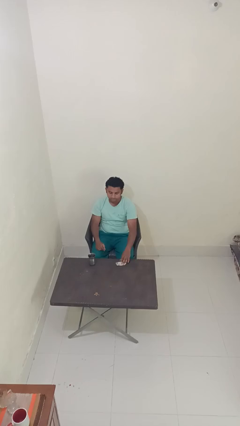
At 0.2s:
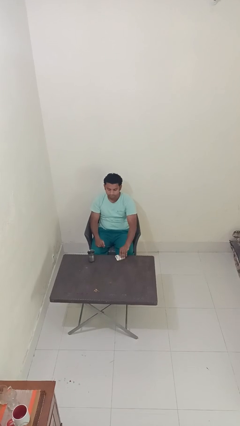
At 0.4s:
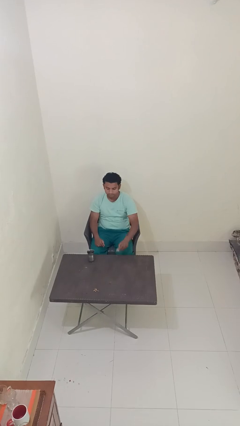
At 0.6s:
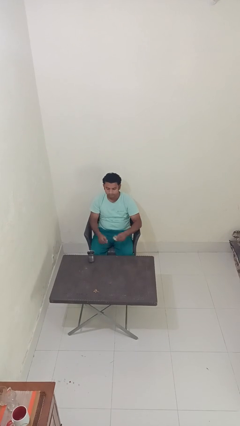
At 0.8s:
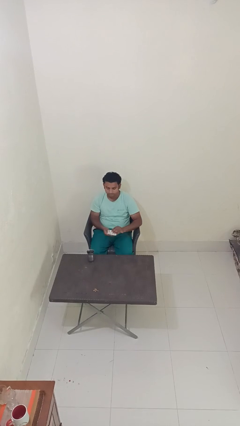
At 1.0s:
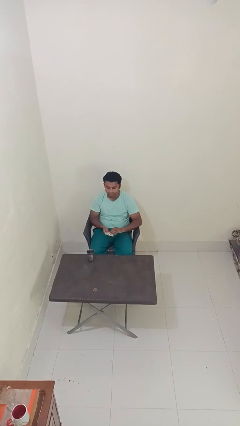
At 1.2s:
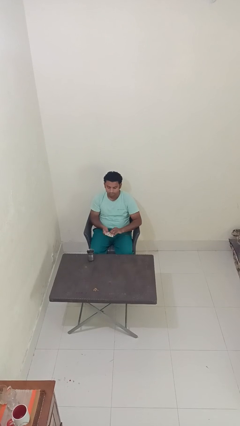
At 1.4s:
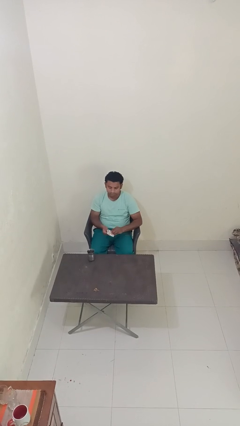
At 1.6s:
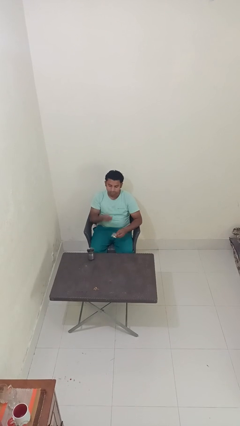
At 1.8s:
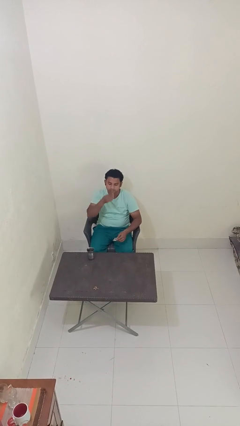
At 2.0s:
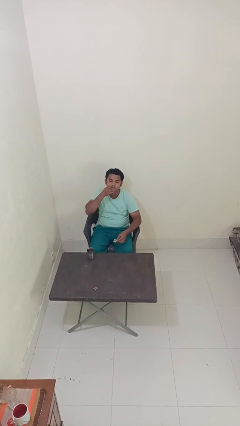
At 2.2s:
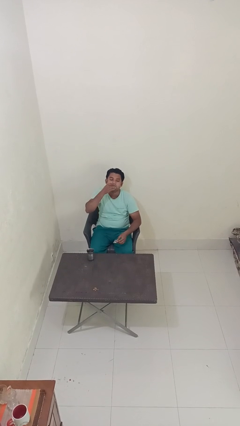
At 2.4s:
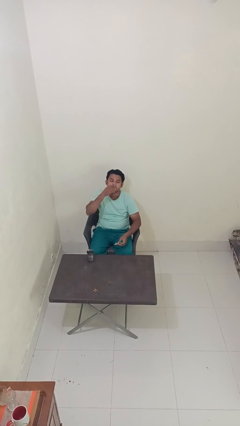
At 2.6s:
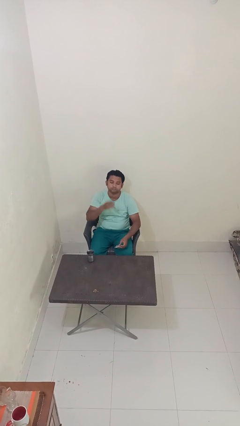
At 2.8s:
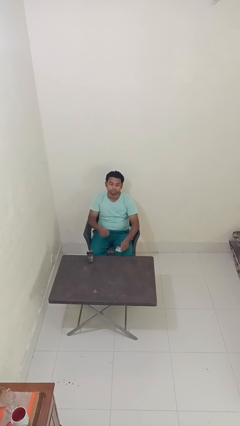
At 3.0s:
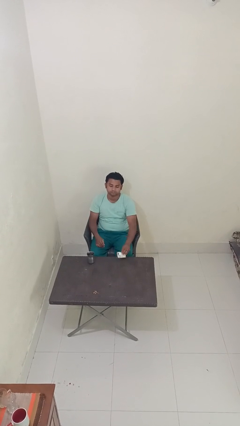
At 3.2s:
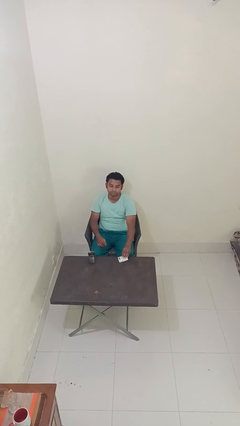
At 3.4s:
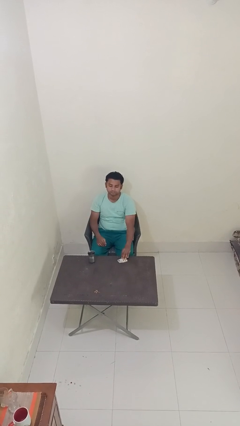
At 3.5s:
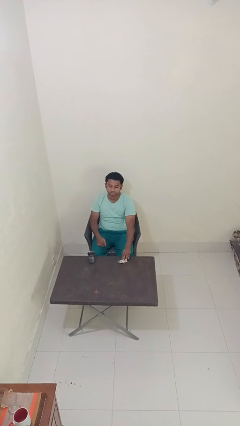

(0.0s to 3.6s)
person takes medicine pills

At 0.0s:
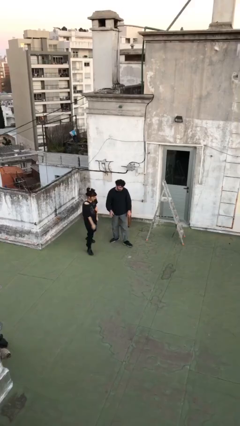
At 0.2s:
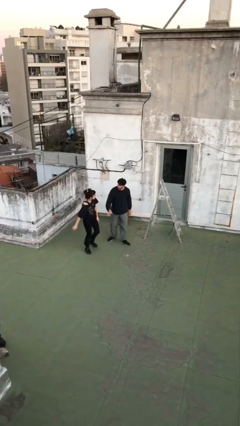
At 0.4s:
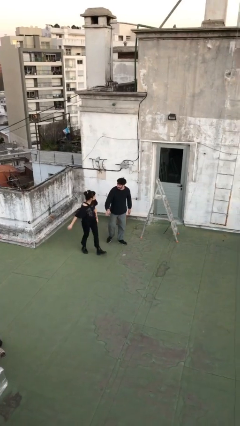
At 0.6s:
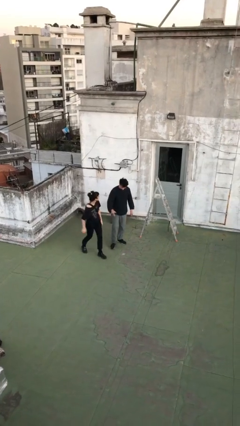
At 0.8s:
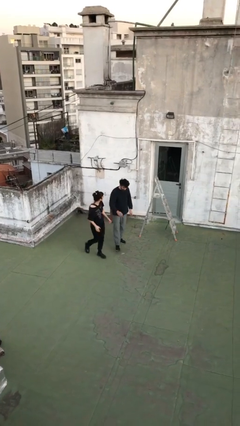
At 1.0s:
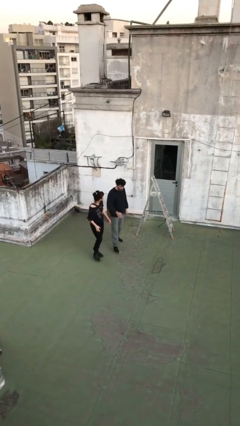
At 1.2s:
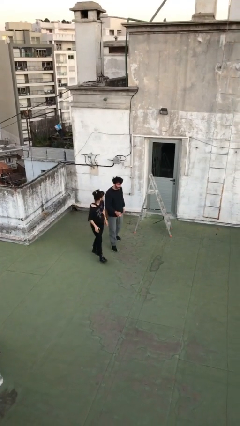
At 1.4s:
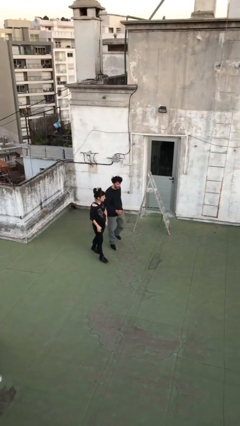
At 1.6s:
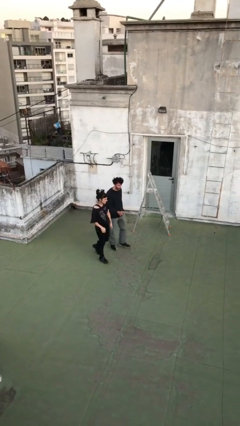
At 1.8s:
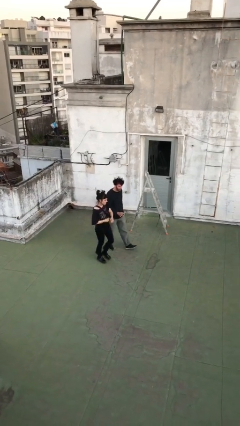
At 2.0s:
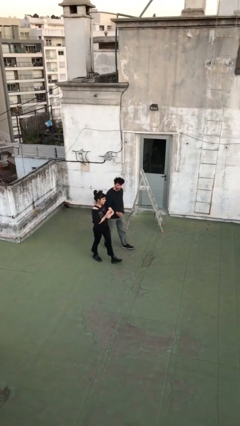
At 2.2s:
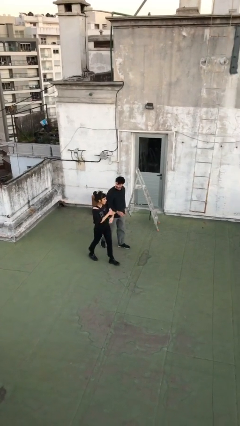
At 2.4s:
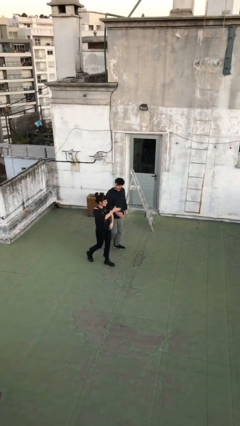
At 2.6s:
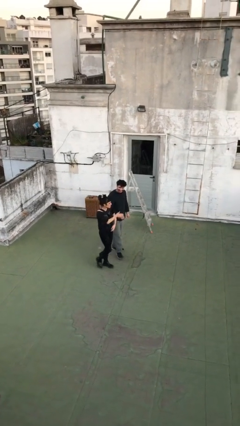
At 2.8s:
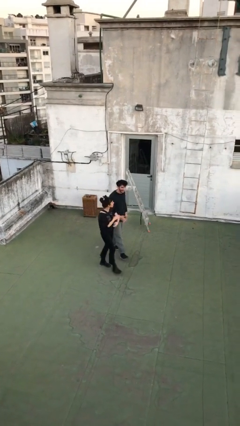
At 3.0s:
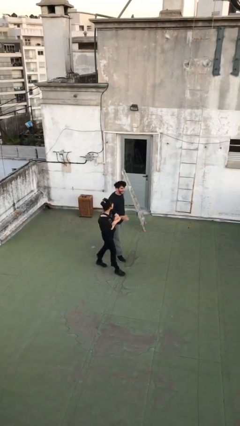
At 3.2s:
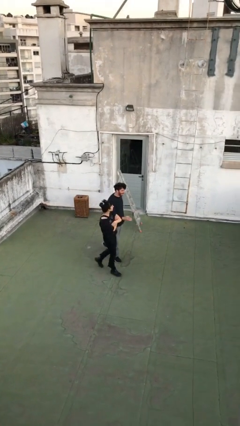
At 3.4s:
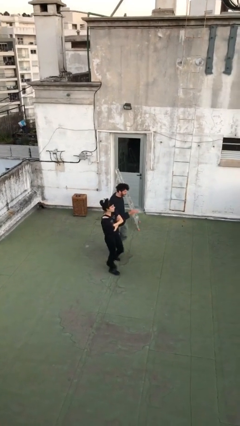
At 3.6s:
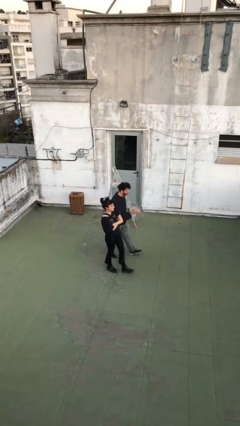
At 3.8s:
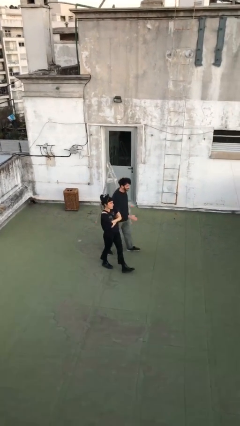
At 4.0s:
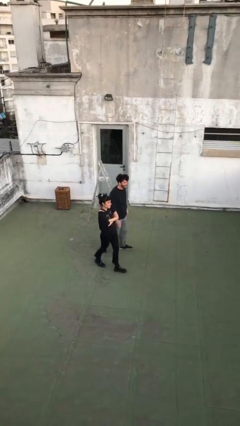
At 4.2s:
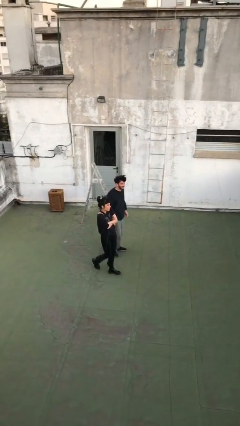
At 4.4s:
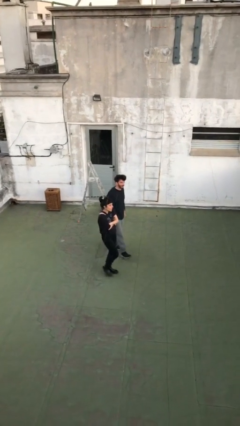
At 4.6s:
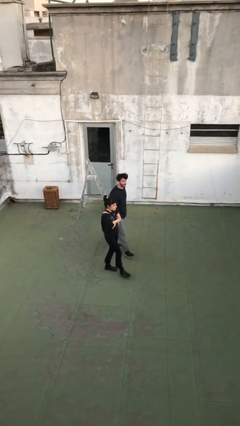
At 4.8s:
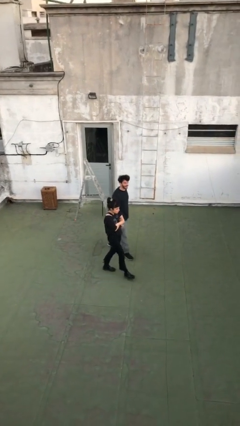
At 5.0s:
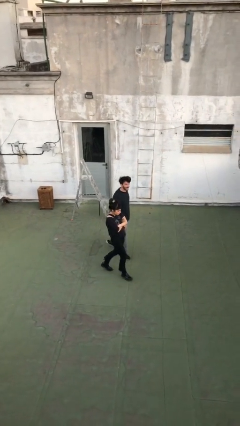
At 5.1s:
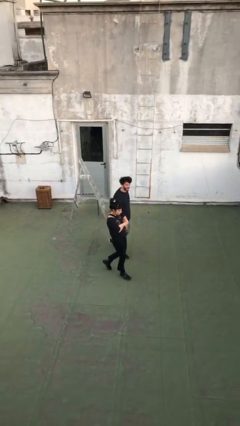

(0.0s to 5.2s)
person talks to person

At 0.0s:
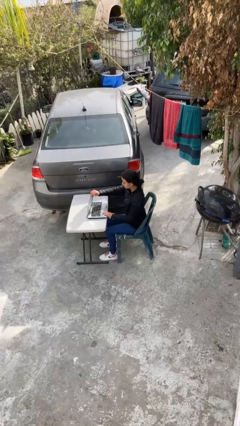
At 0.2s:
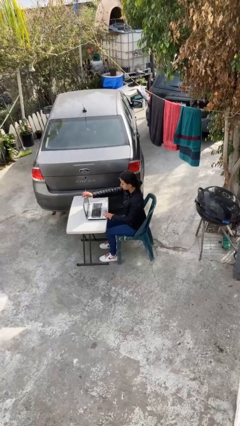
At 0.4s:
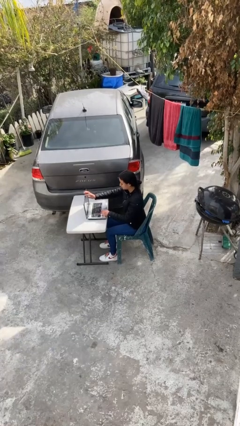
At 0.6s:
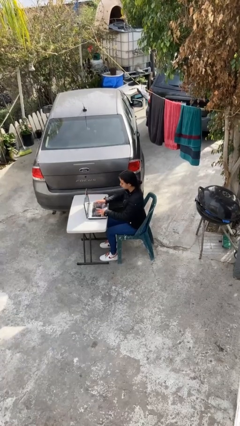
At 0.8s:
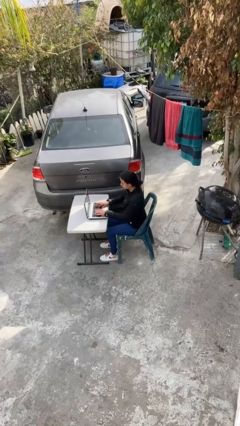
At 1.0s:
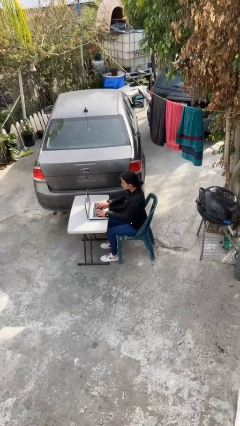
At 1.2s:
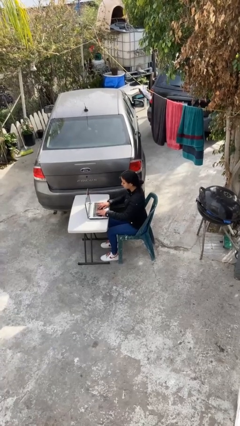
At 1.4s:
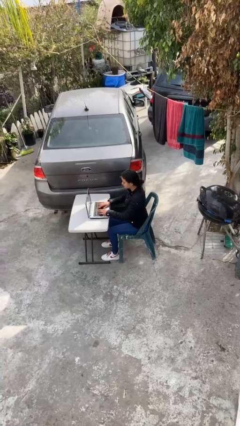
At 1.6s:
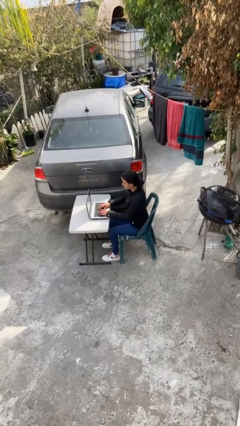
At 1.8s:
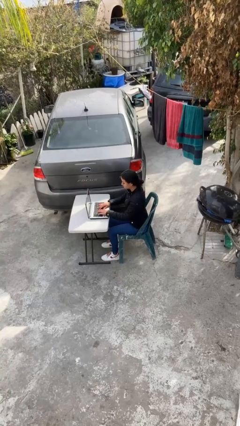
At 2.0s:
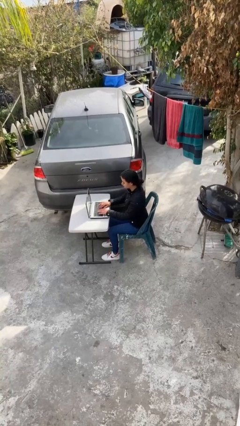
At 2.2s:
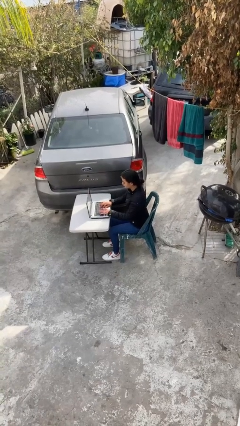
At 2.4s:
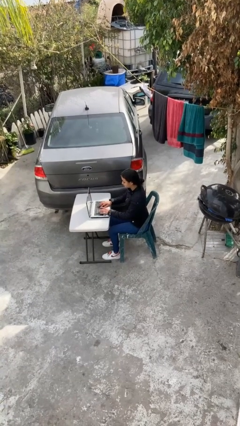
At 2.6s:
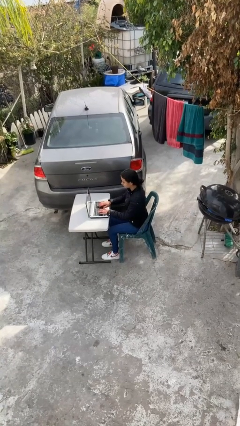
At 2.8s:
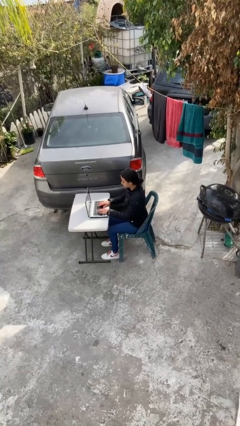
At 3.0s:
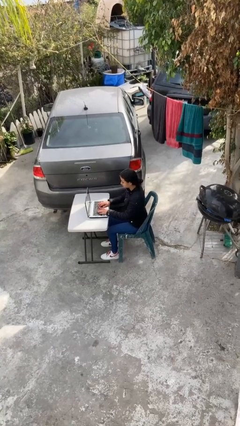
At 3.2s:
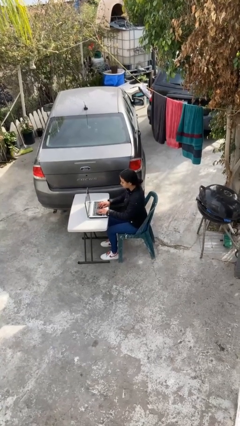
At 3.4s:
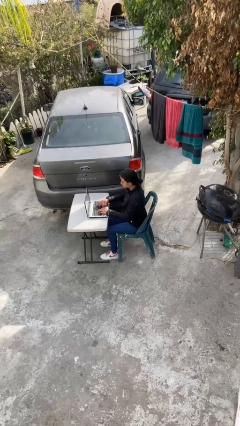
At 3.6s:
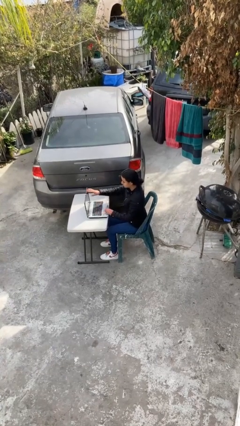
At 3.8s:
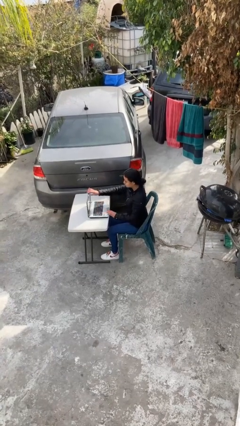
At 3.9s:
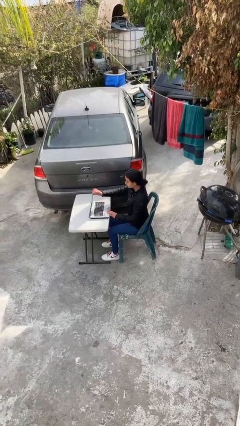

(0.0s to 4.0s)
person interacts with laptop

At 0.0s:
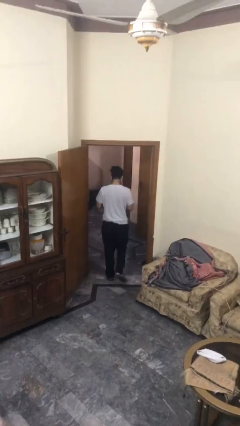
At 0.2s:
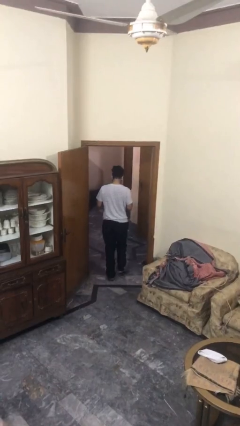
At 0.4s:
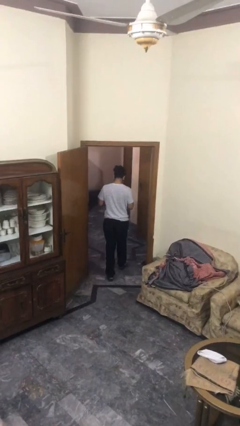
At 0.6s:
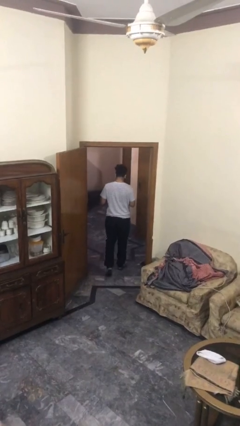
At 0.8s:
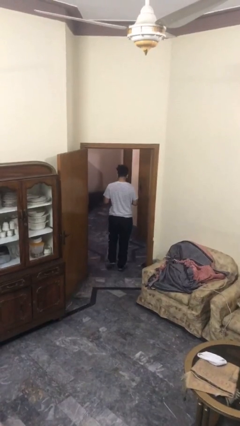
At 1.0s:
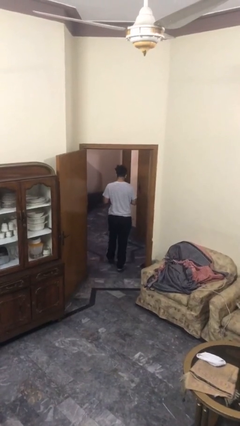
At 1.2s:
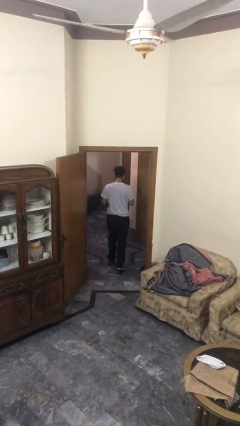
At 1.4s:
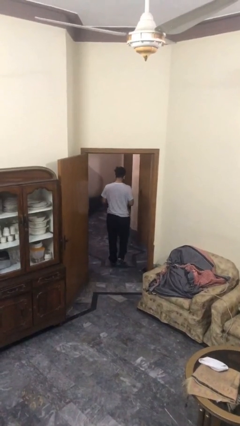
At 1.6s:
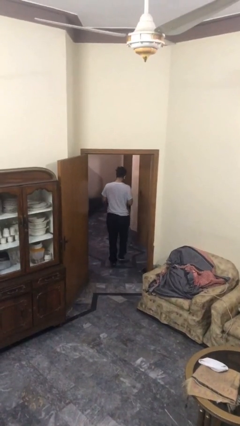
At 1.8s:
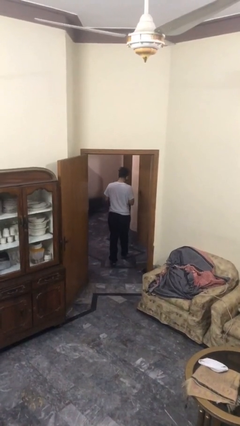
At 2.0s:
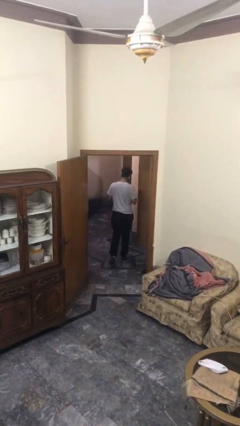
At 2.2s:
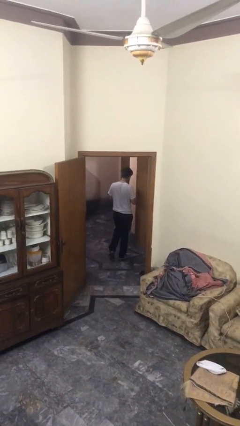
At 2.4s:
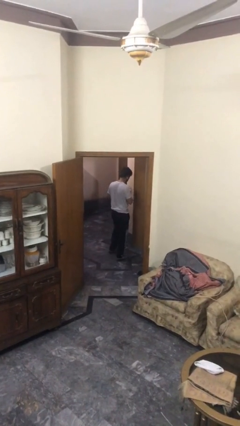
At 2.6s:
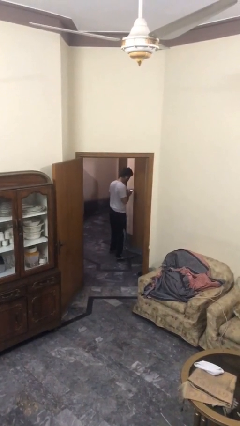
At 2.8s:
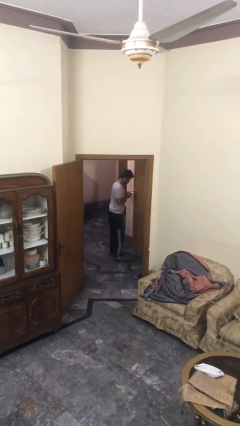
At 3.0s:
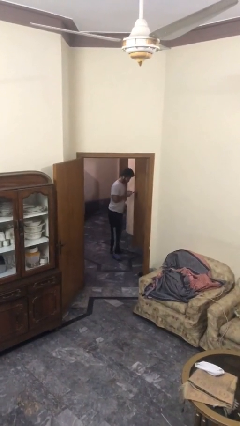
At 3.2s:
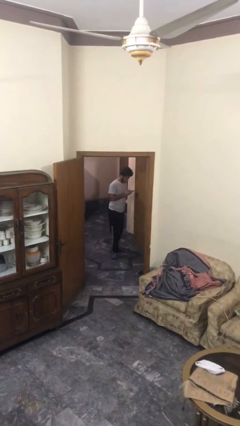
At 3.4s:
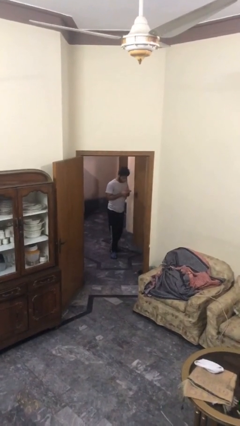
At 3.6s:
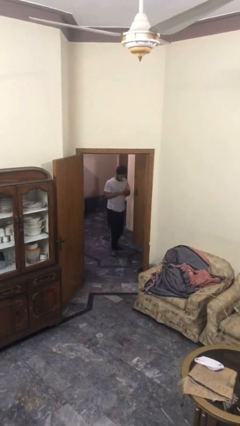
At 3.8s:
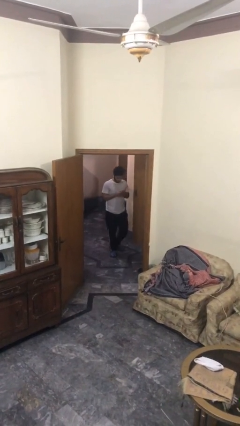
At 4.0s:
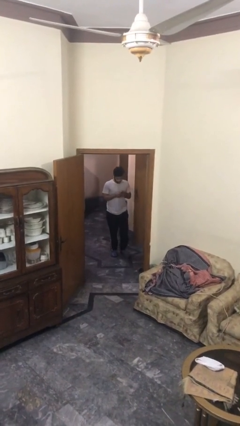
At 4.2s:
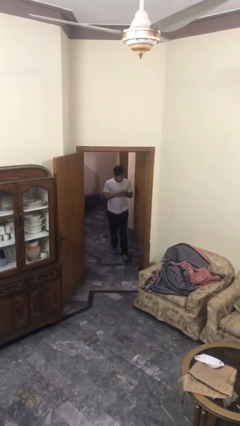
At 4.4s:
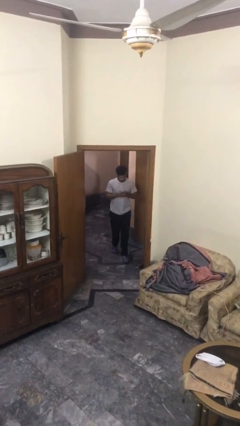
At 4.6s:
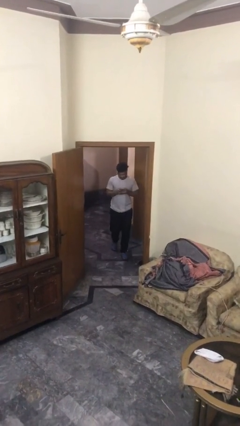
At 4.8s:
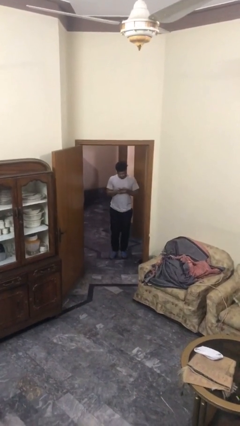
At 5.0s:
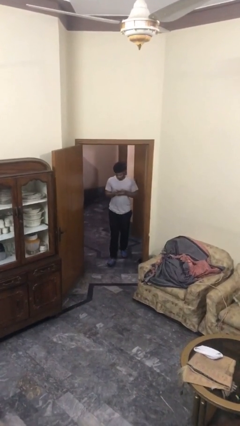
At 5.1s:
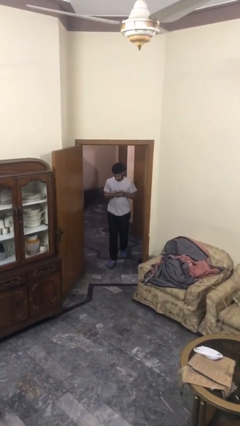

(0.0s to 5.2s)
person exits scene through structure
